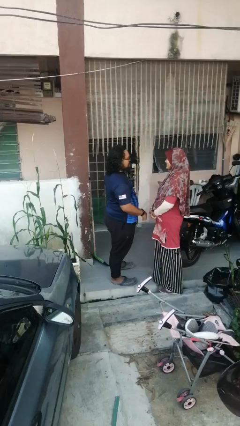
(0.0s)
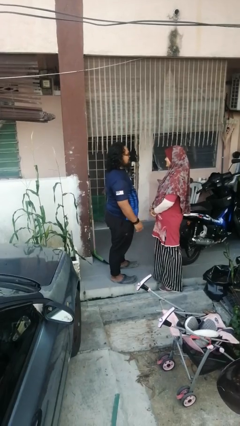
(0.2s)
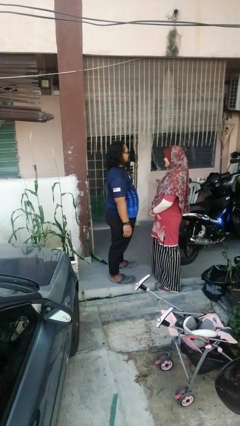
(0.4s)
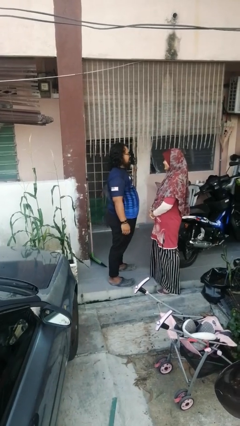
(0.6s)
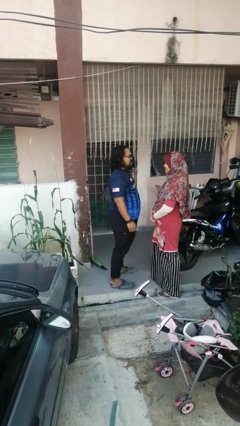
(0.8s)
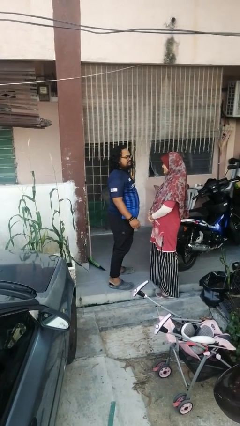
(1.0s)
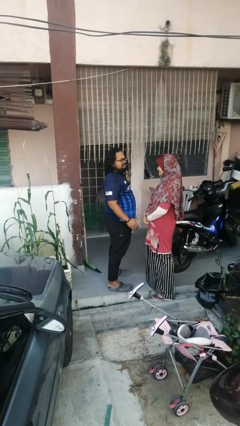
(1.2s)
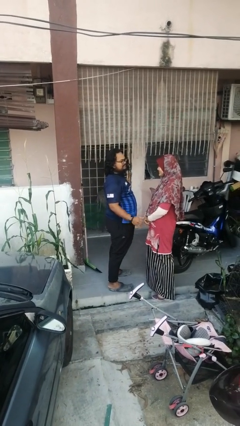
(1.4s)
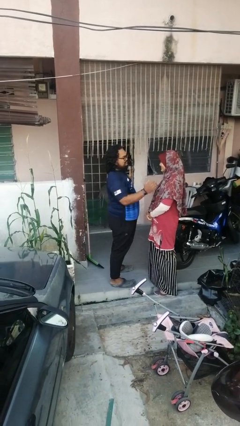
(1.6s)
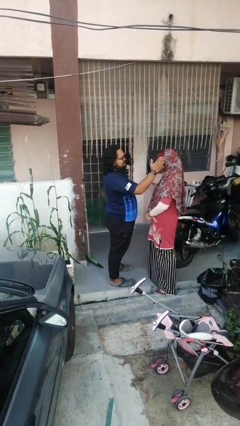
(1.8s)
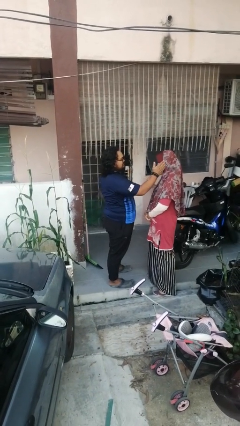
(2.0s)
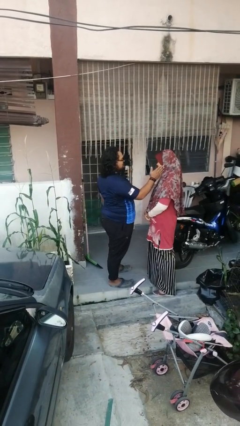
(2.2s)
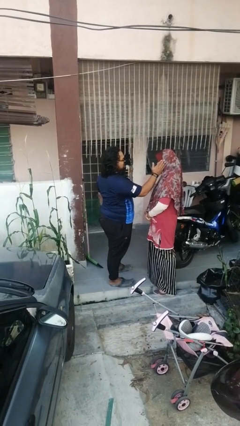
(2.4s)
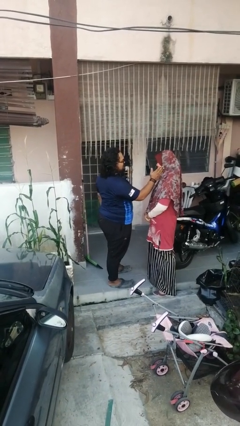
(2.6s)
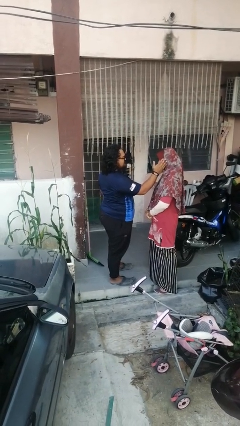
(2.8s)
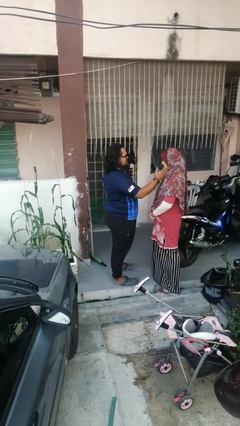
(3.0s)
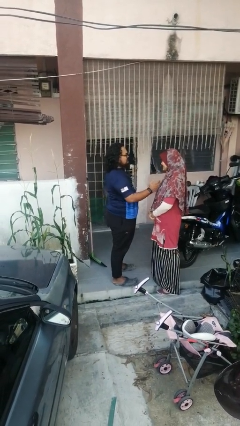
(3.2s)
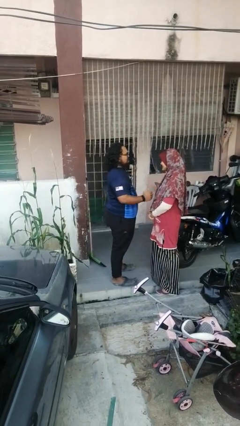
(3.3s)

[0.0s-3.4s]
person touches face of person

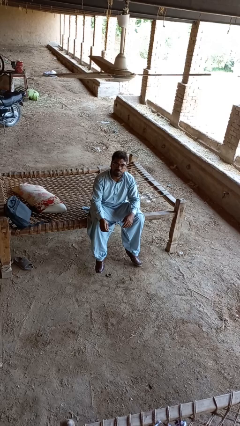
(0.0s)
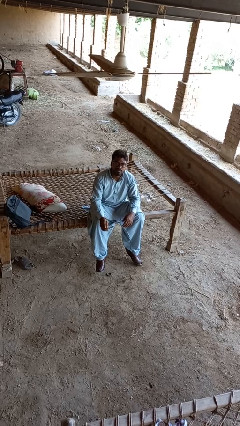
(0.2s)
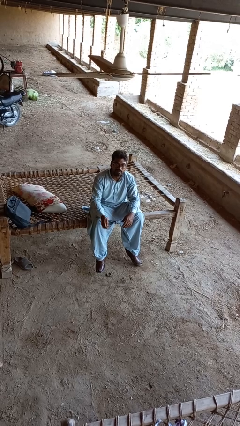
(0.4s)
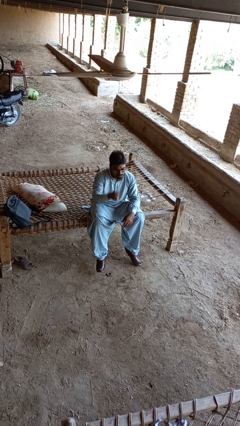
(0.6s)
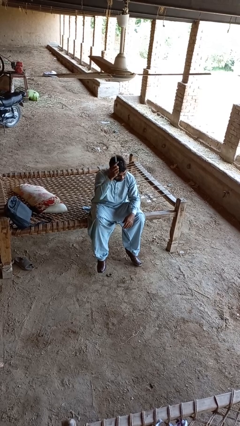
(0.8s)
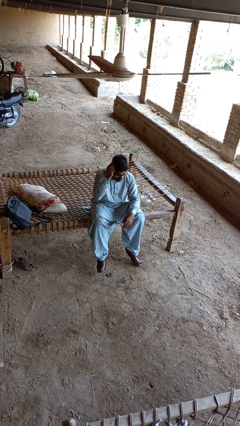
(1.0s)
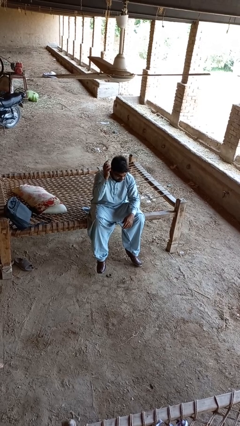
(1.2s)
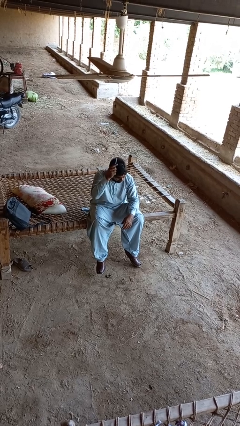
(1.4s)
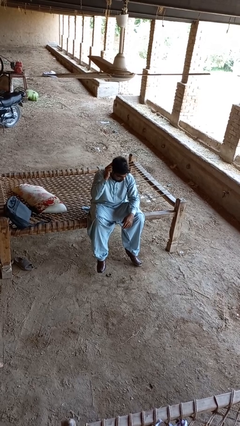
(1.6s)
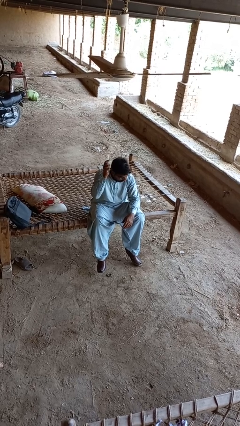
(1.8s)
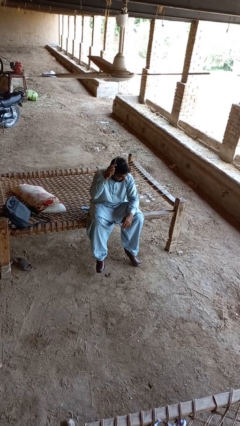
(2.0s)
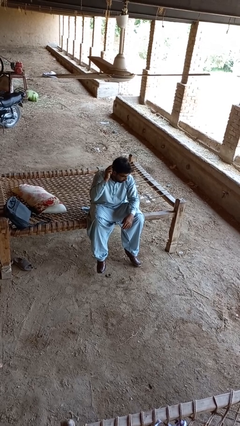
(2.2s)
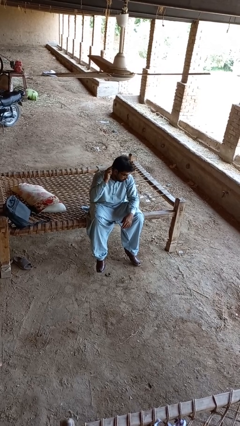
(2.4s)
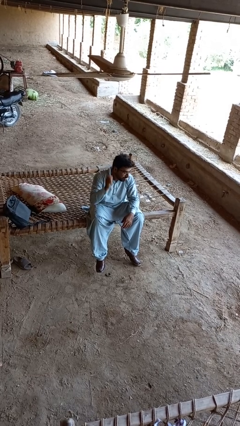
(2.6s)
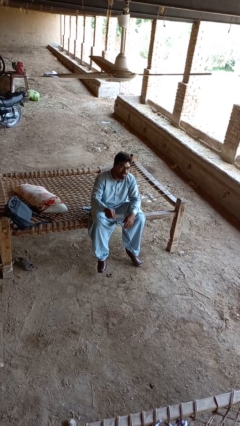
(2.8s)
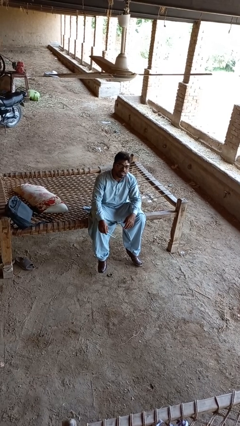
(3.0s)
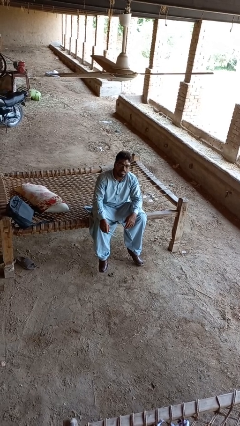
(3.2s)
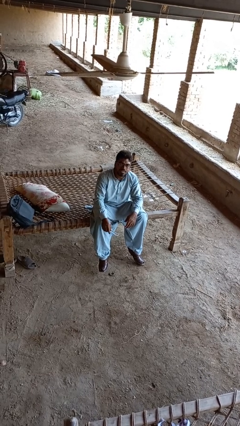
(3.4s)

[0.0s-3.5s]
person brushes hair

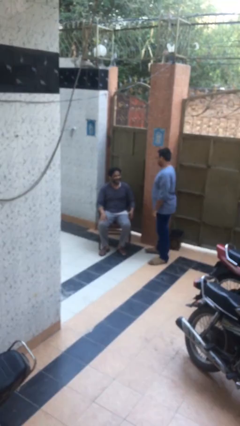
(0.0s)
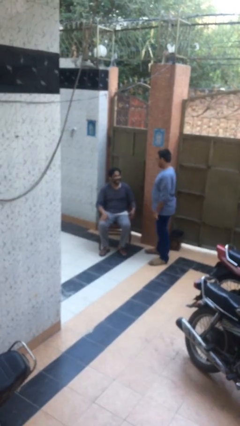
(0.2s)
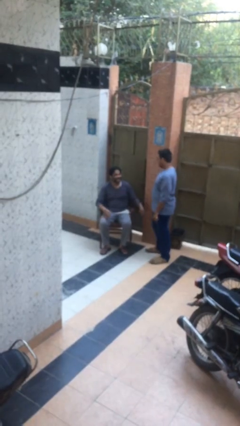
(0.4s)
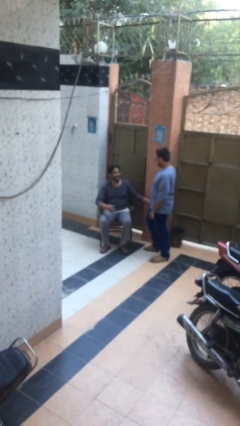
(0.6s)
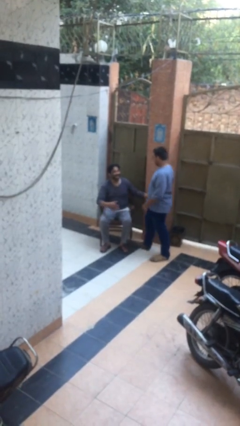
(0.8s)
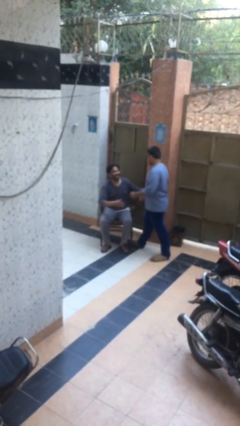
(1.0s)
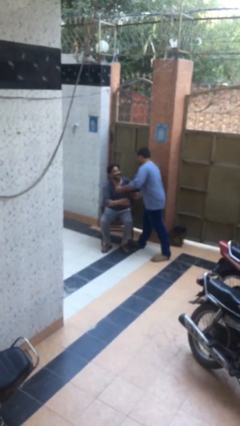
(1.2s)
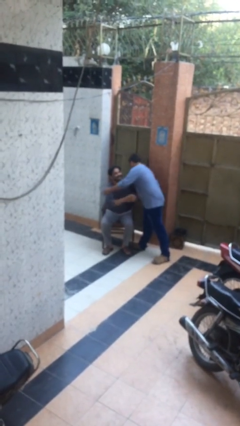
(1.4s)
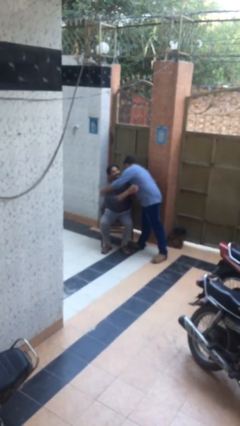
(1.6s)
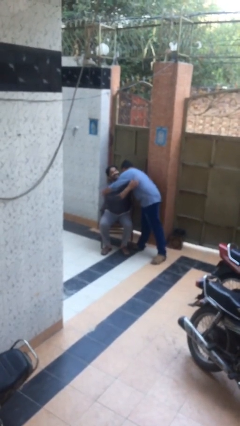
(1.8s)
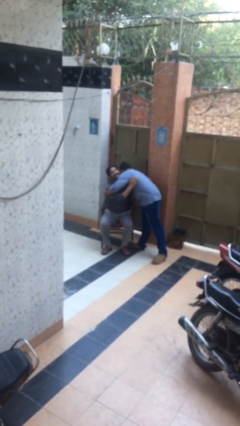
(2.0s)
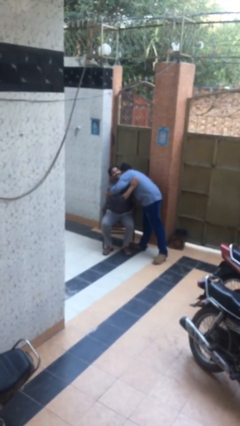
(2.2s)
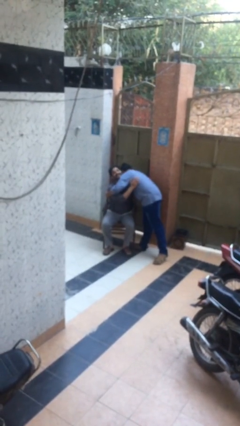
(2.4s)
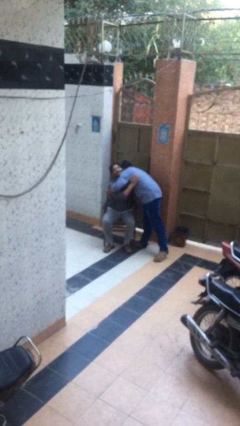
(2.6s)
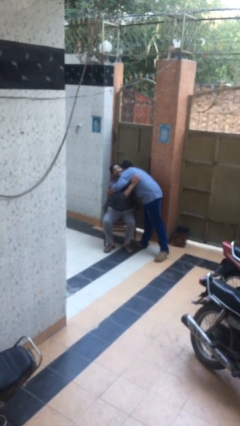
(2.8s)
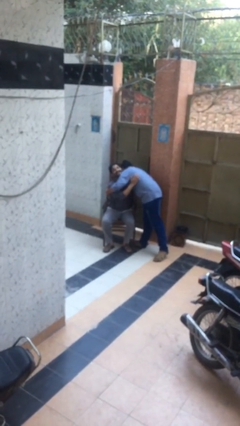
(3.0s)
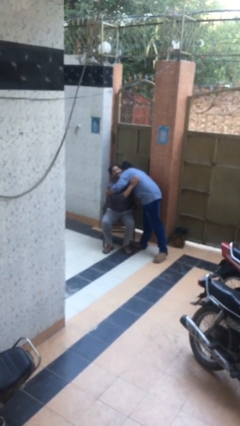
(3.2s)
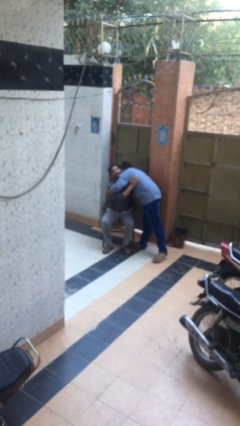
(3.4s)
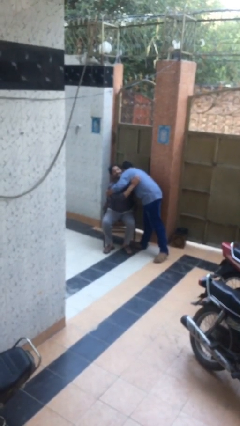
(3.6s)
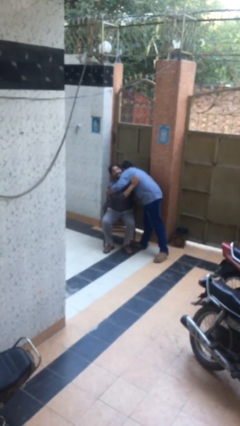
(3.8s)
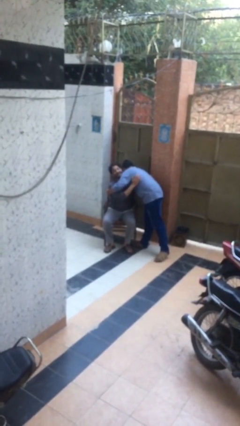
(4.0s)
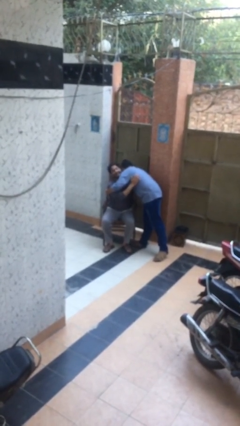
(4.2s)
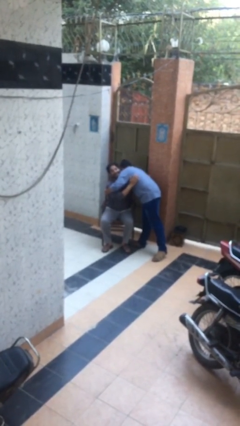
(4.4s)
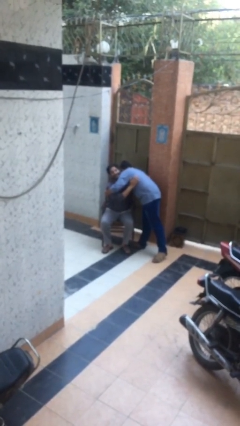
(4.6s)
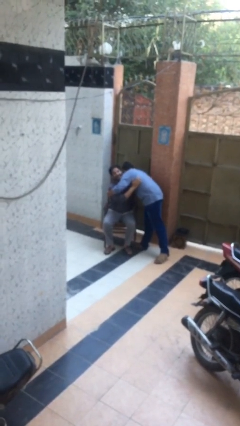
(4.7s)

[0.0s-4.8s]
person embraces person

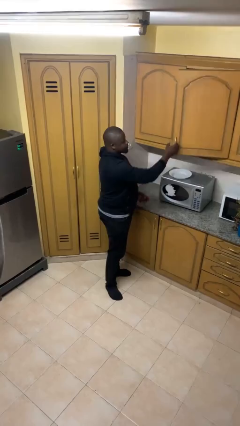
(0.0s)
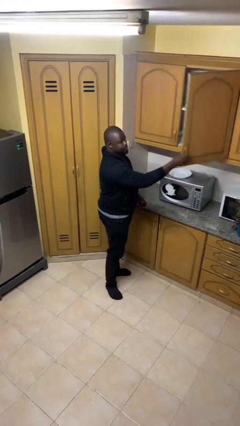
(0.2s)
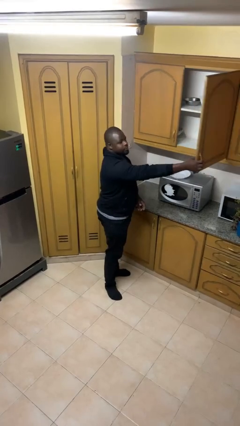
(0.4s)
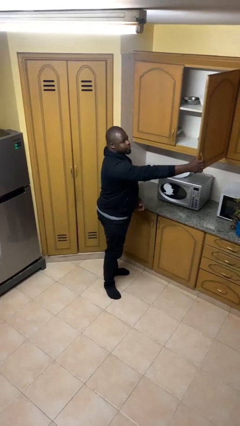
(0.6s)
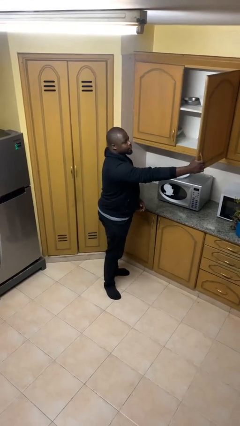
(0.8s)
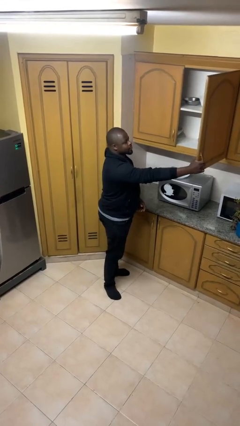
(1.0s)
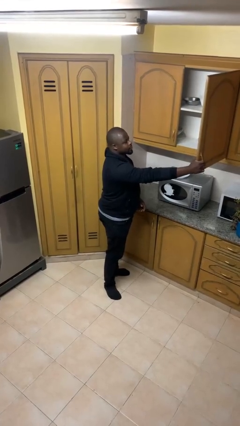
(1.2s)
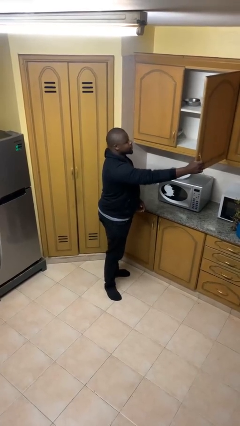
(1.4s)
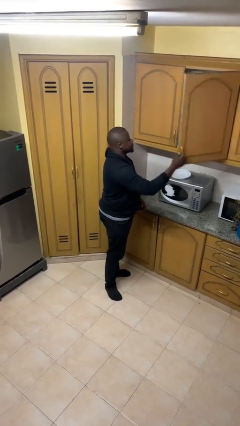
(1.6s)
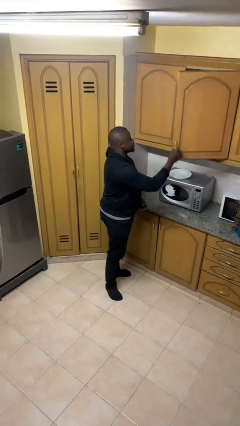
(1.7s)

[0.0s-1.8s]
person opens cabinet

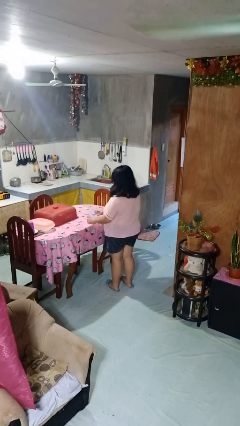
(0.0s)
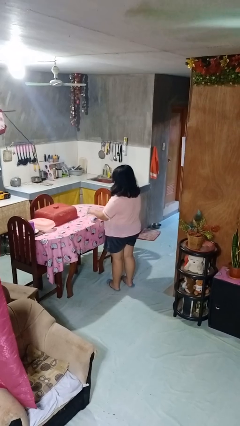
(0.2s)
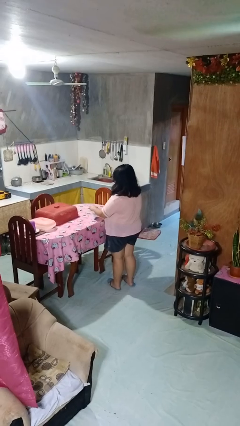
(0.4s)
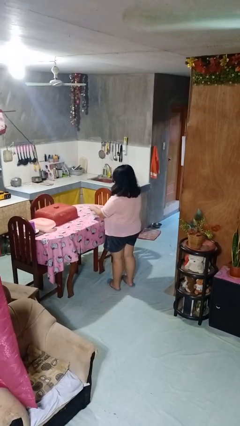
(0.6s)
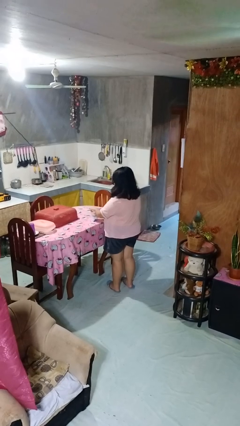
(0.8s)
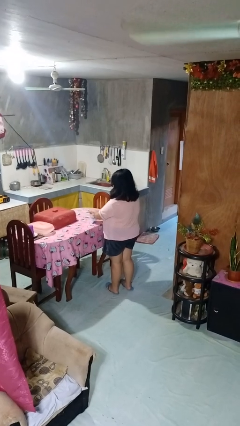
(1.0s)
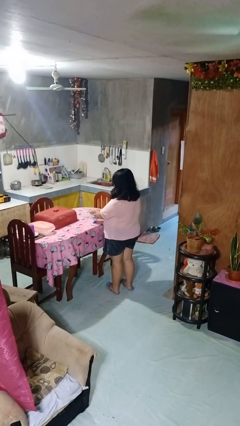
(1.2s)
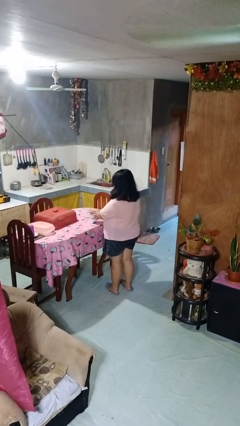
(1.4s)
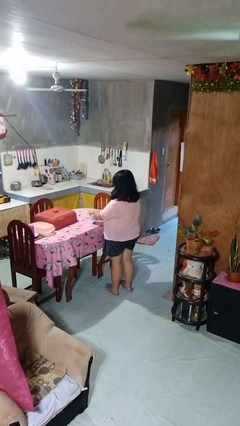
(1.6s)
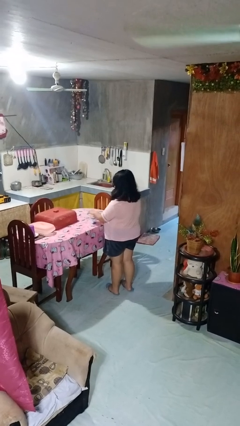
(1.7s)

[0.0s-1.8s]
person closes jar

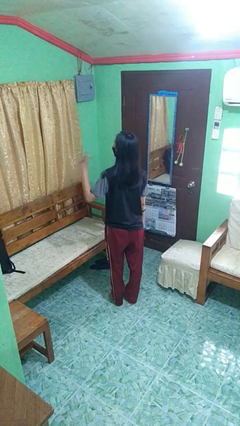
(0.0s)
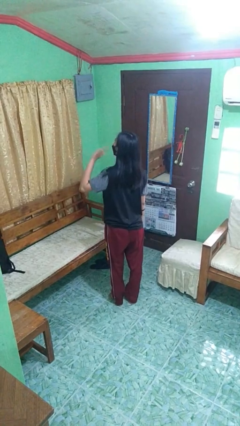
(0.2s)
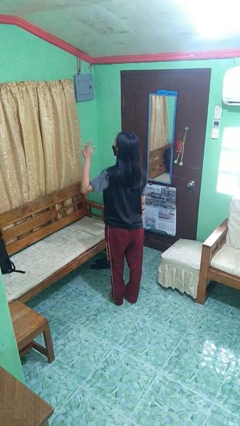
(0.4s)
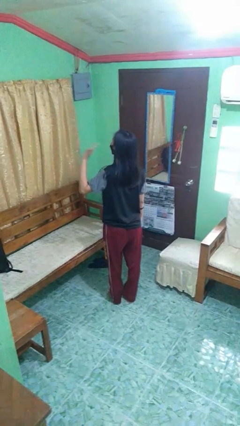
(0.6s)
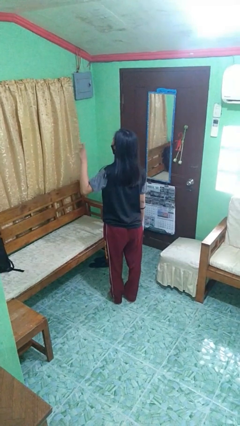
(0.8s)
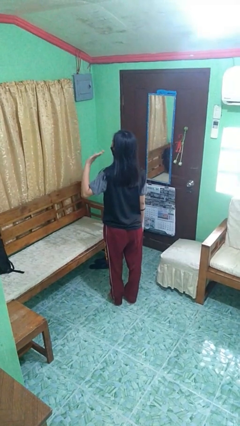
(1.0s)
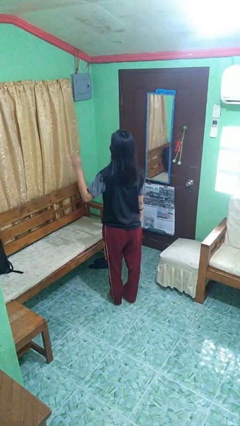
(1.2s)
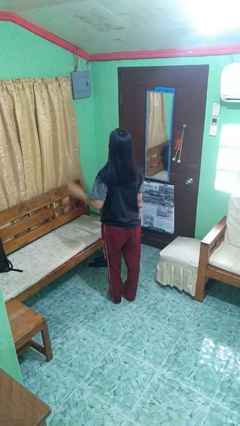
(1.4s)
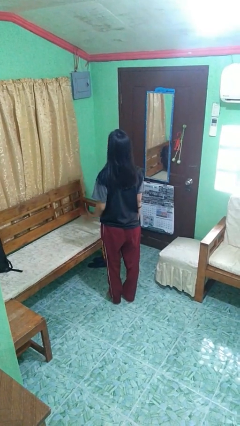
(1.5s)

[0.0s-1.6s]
person waves at person

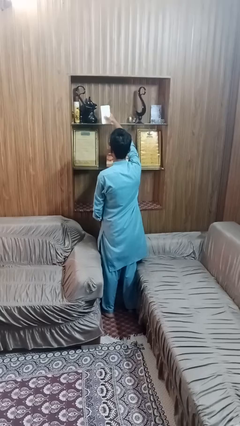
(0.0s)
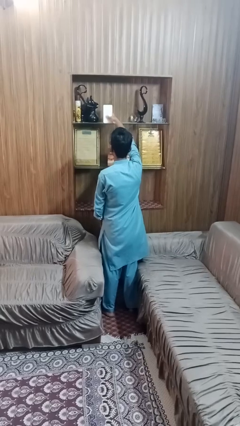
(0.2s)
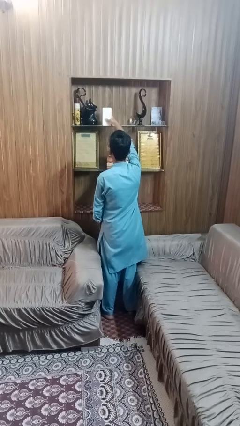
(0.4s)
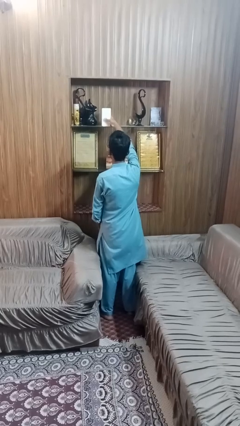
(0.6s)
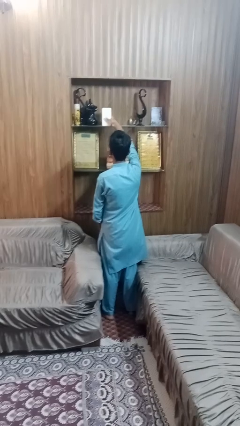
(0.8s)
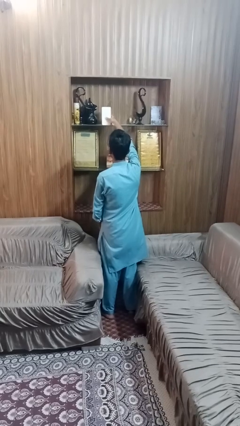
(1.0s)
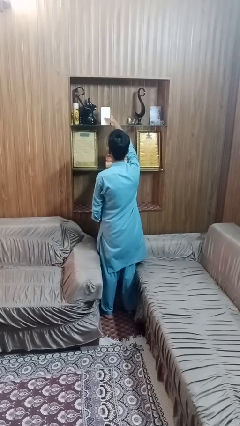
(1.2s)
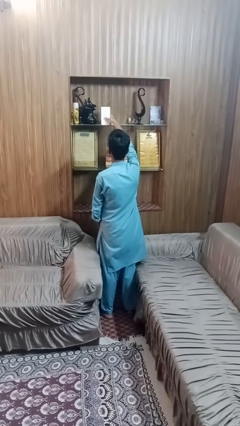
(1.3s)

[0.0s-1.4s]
person puts down object on shelf
